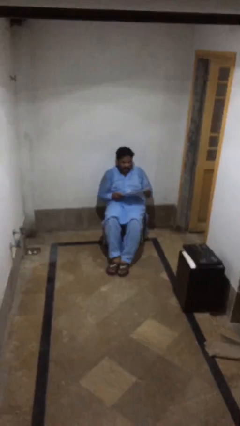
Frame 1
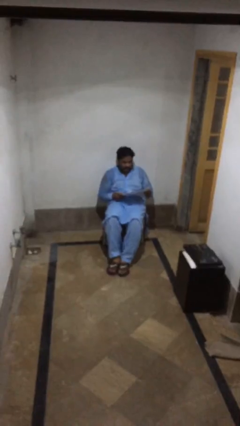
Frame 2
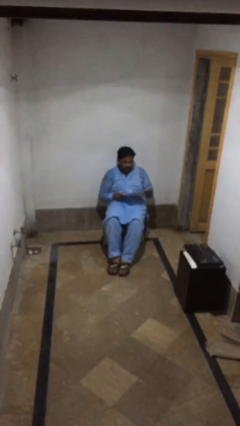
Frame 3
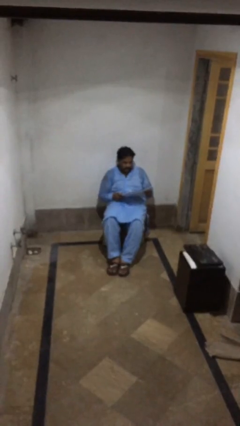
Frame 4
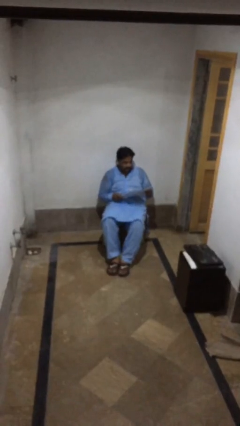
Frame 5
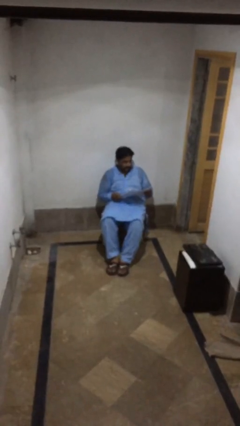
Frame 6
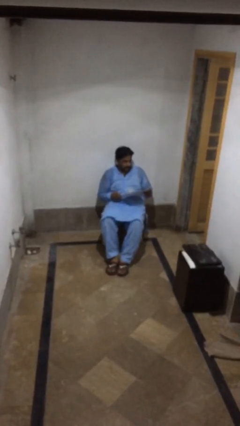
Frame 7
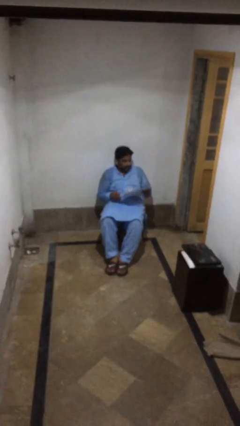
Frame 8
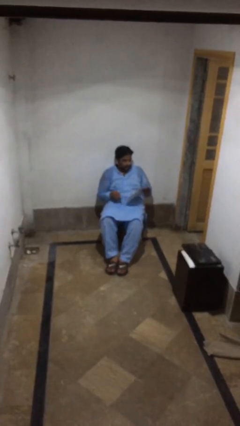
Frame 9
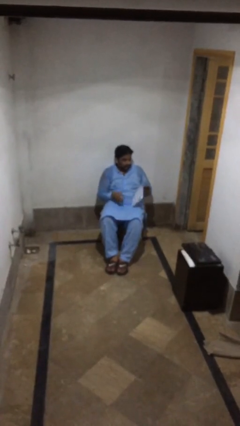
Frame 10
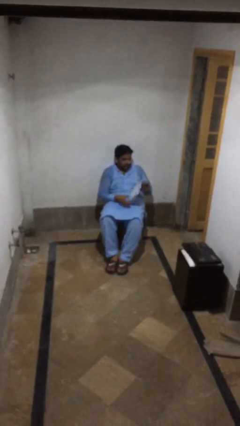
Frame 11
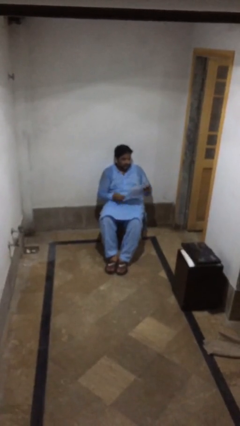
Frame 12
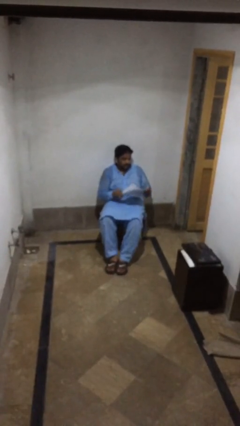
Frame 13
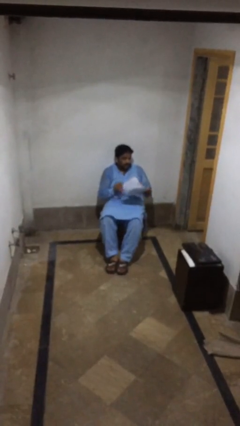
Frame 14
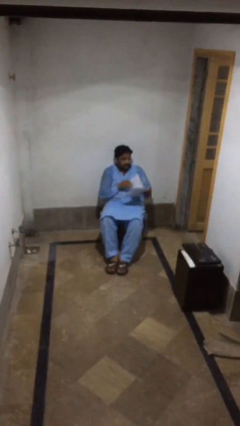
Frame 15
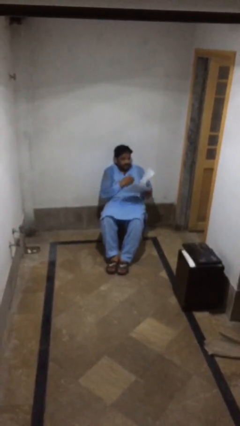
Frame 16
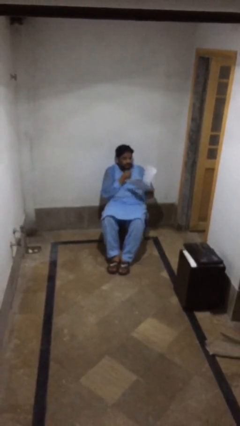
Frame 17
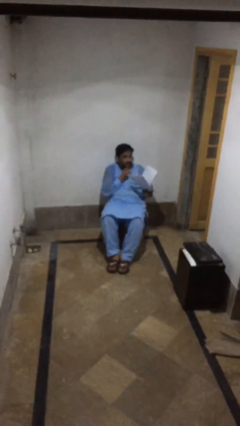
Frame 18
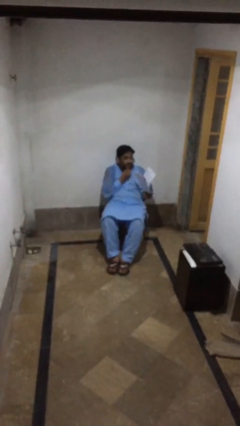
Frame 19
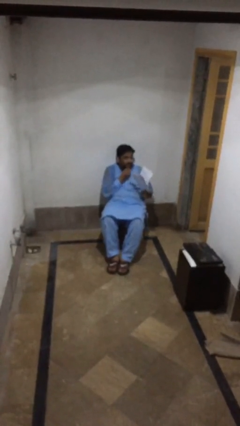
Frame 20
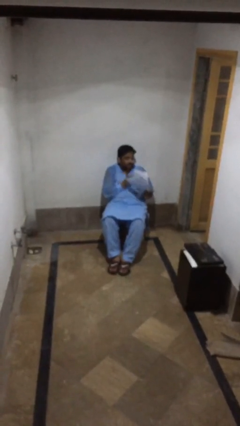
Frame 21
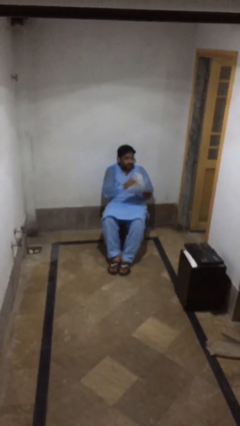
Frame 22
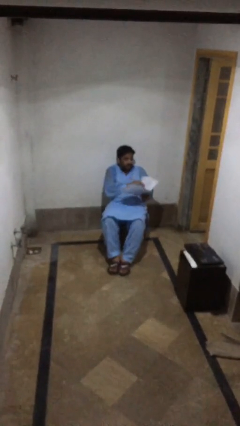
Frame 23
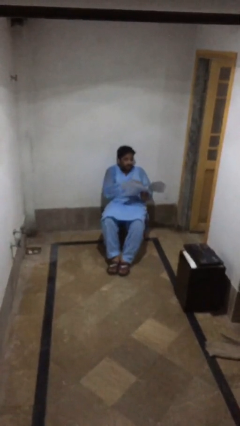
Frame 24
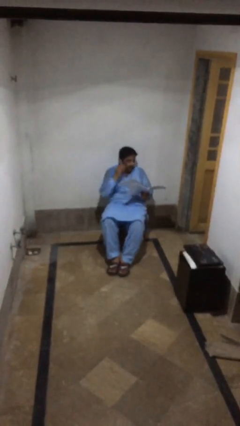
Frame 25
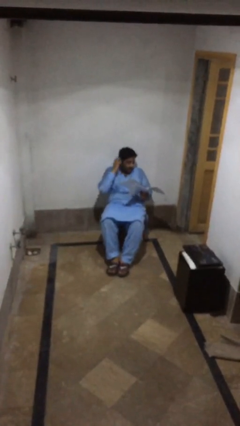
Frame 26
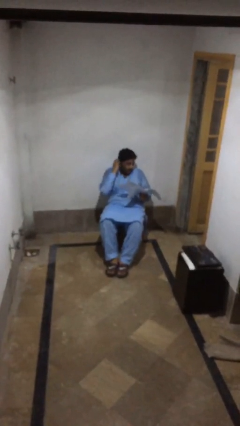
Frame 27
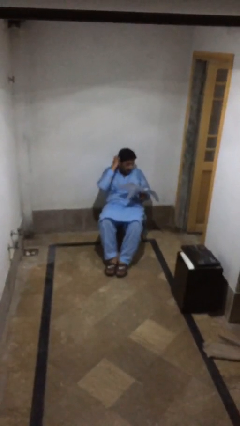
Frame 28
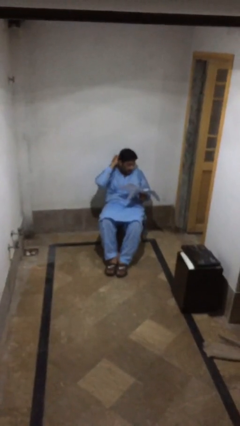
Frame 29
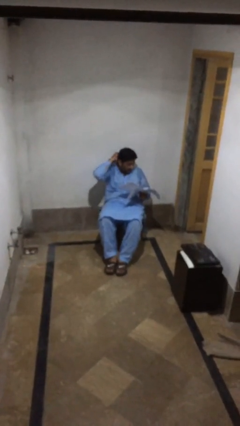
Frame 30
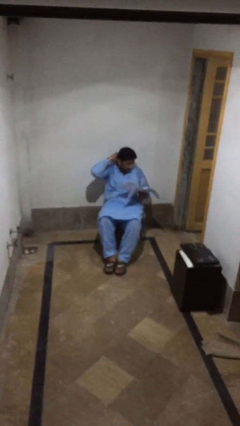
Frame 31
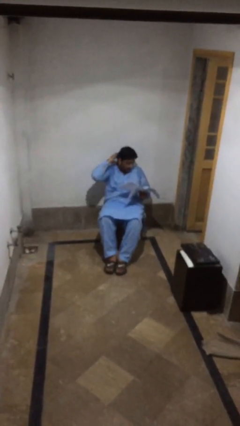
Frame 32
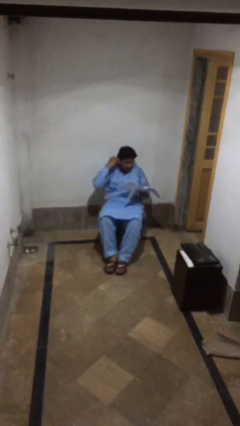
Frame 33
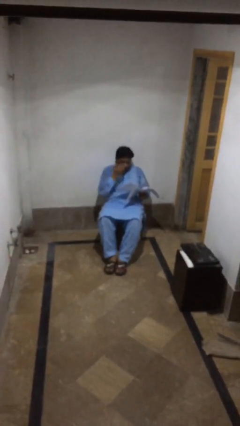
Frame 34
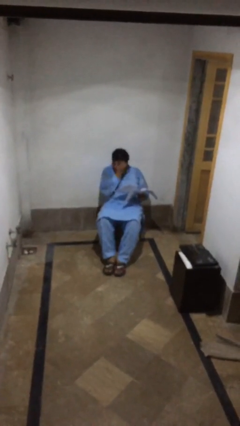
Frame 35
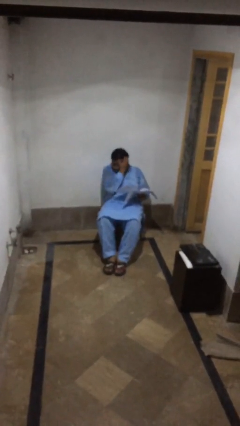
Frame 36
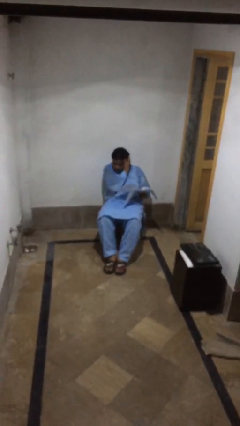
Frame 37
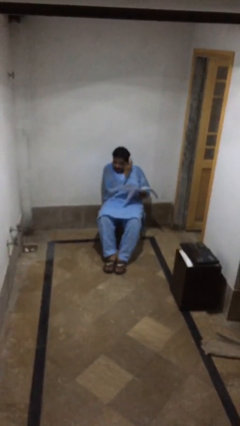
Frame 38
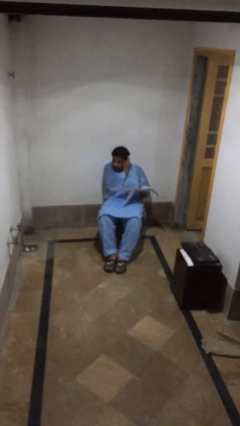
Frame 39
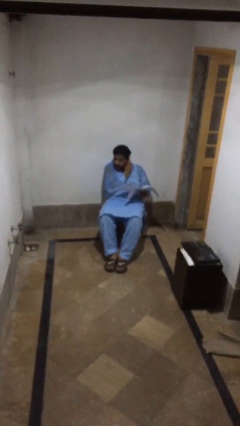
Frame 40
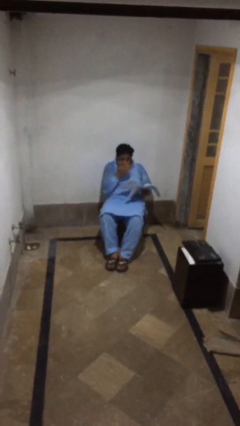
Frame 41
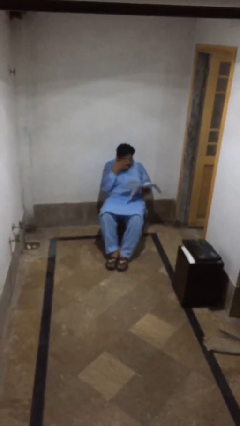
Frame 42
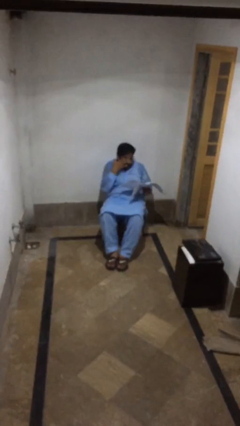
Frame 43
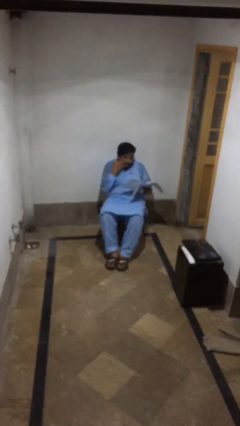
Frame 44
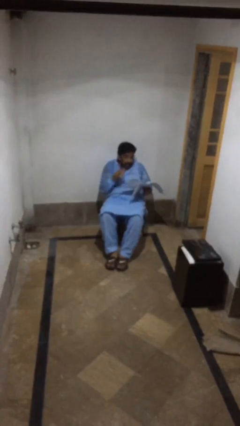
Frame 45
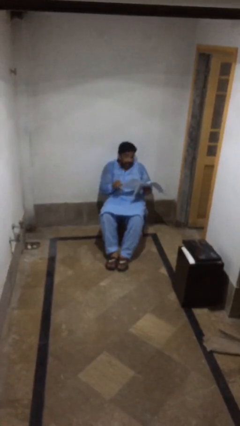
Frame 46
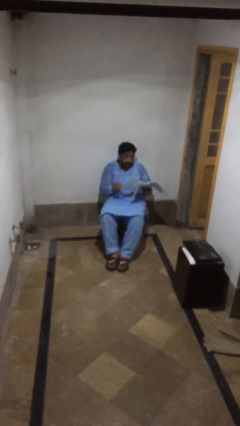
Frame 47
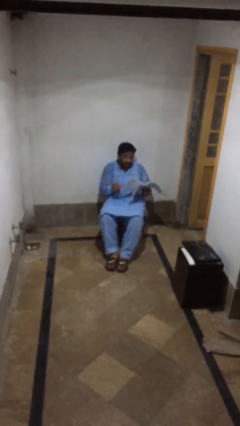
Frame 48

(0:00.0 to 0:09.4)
person reads document

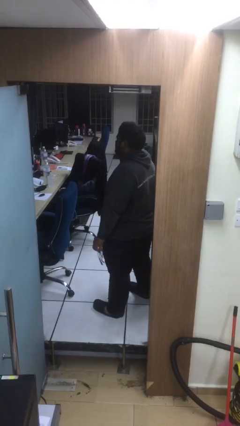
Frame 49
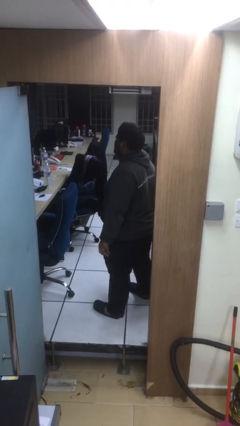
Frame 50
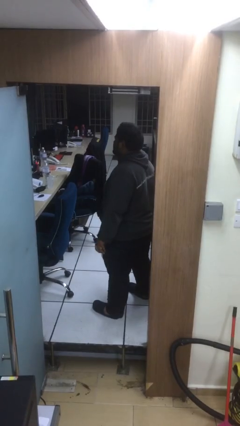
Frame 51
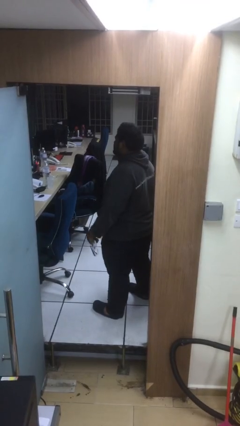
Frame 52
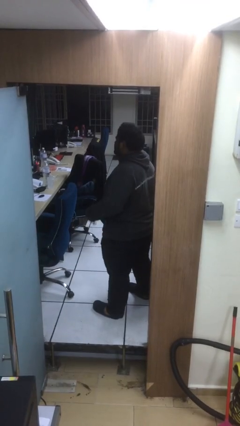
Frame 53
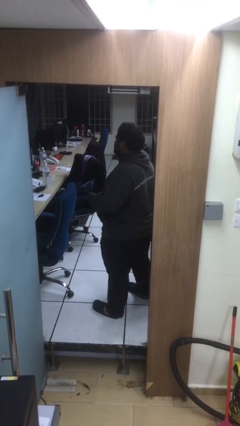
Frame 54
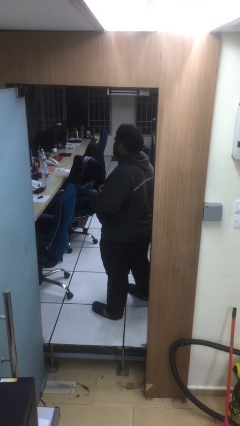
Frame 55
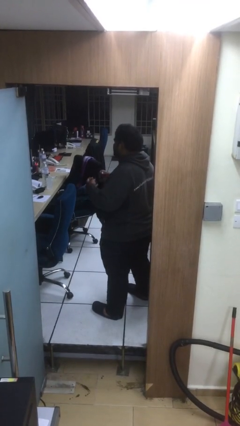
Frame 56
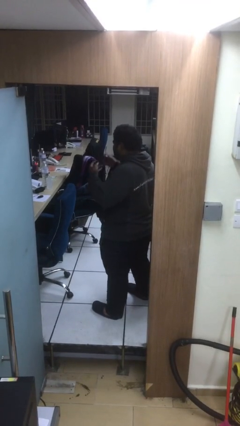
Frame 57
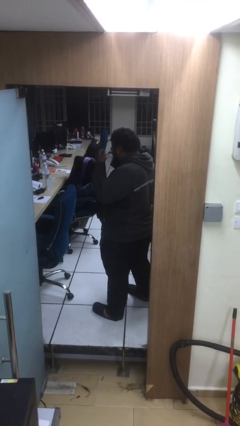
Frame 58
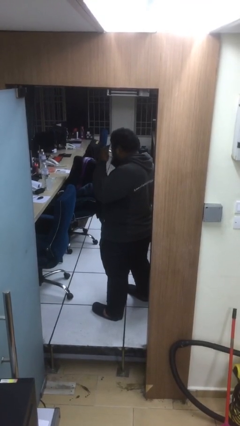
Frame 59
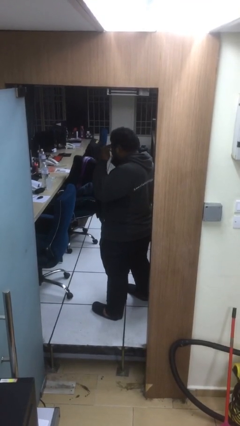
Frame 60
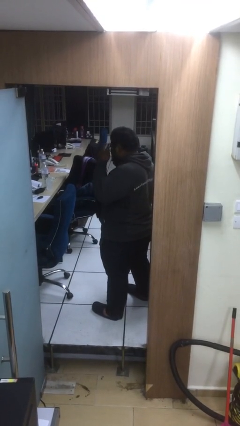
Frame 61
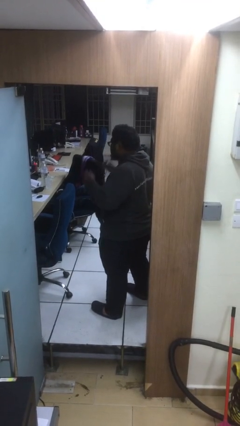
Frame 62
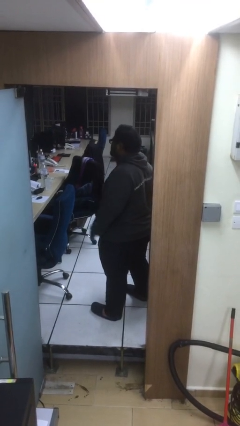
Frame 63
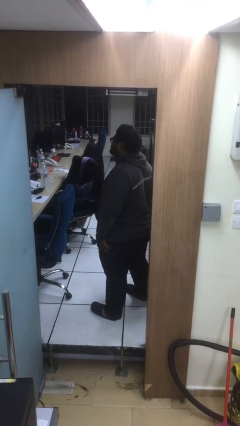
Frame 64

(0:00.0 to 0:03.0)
person puts on glasses

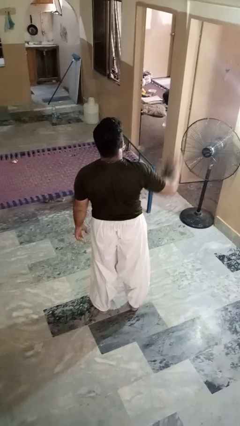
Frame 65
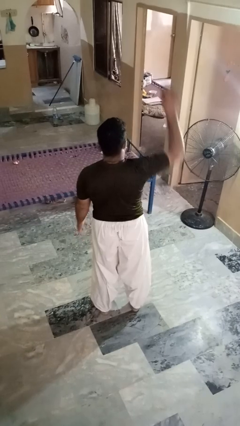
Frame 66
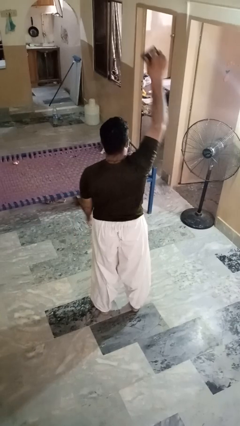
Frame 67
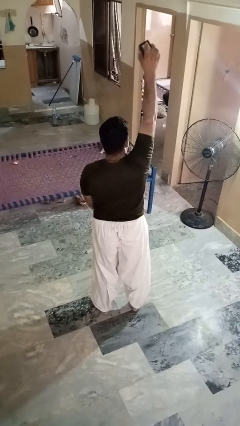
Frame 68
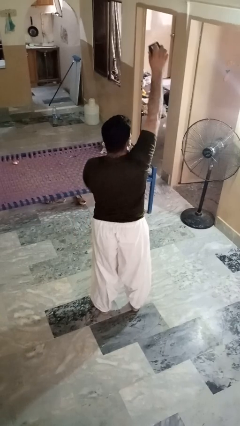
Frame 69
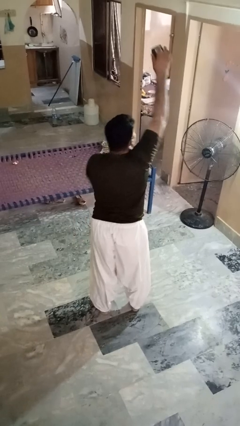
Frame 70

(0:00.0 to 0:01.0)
person drops object

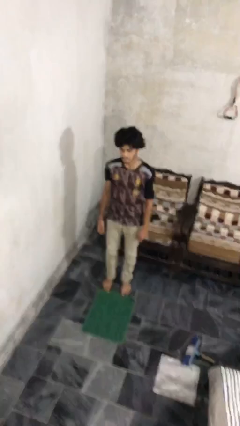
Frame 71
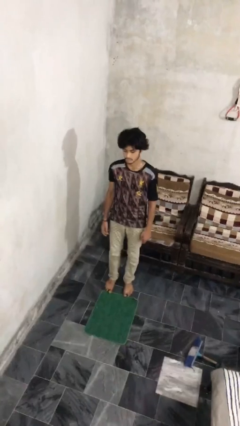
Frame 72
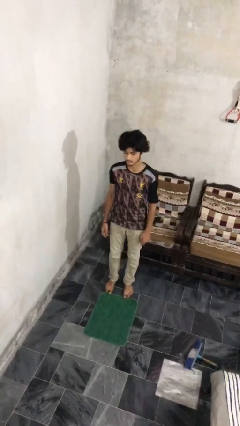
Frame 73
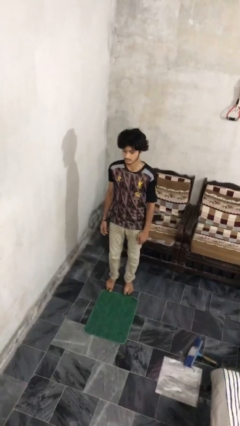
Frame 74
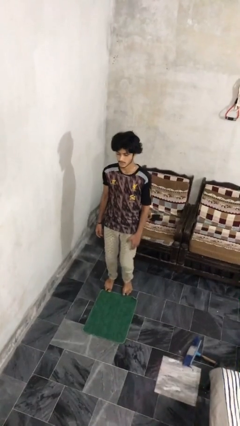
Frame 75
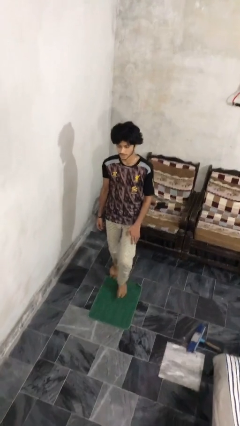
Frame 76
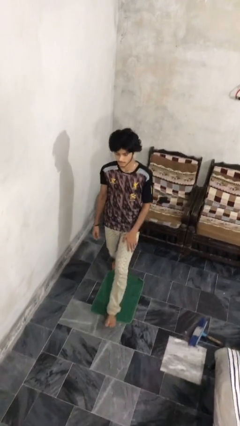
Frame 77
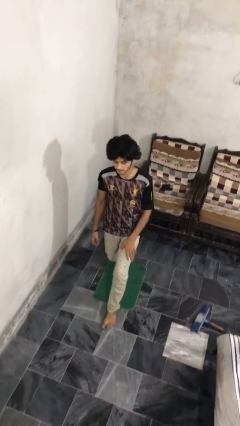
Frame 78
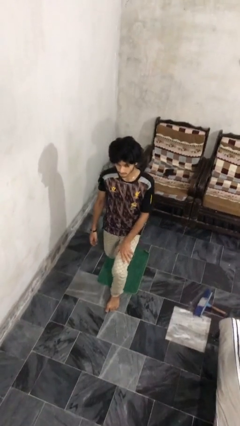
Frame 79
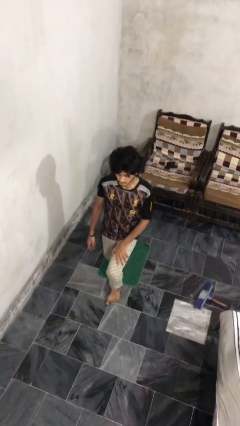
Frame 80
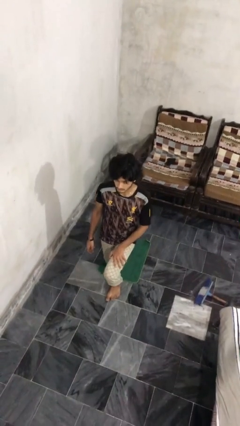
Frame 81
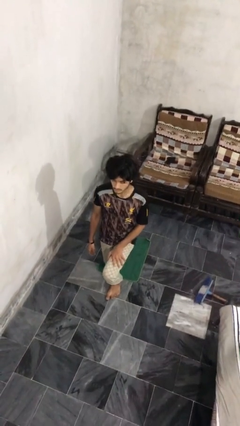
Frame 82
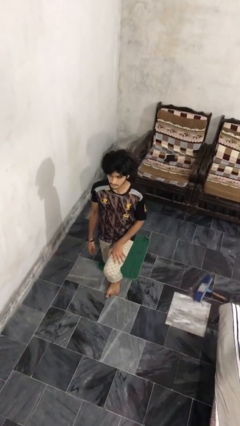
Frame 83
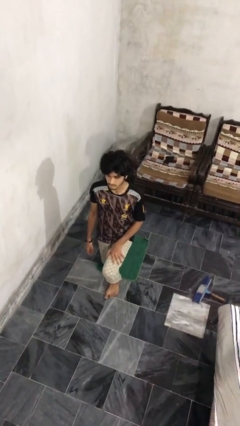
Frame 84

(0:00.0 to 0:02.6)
person kneels

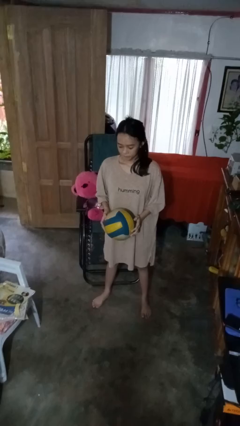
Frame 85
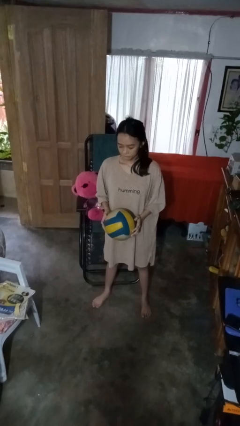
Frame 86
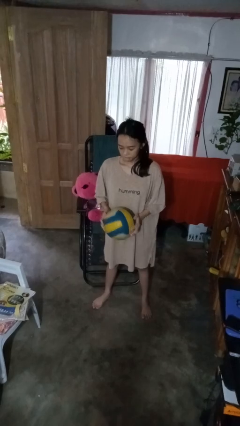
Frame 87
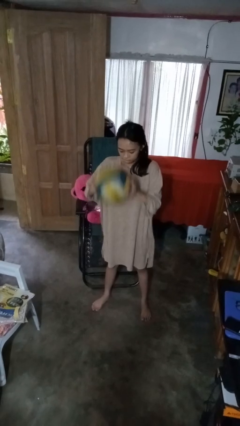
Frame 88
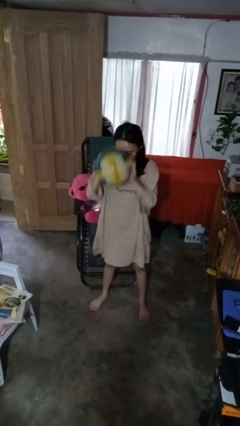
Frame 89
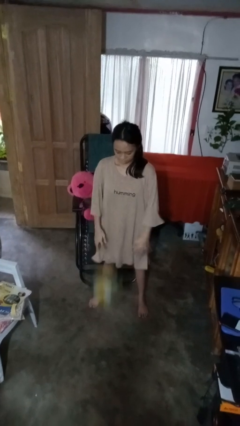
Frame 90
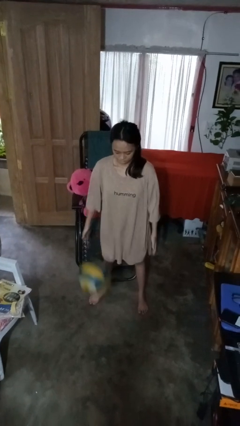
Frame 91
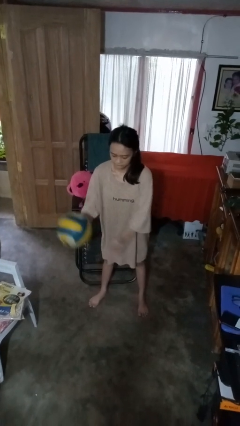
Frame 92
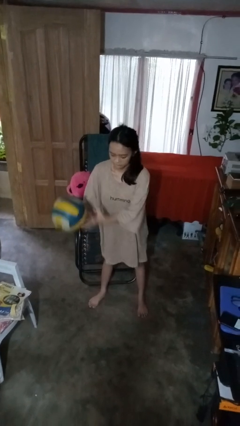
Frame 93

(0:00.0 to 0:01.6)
person bounces ball on floor
